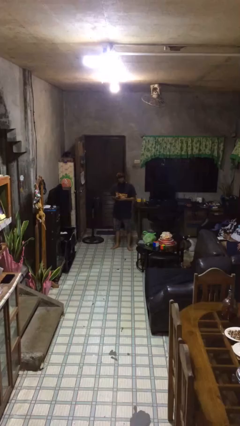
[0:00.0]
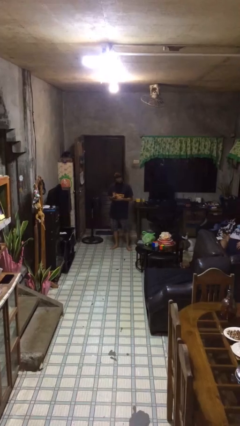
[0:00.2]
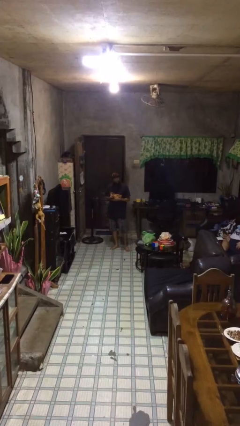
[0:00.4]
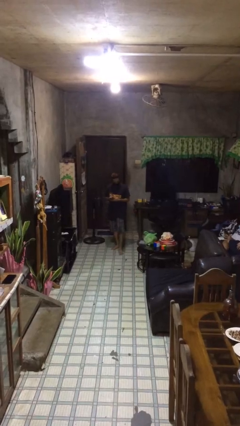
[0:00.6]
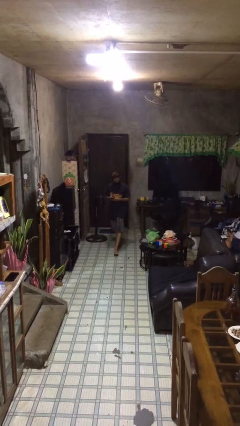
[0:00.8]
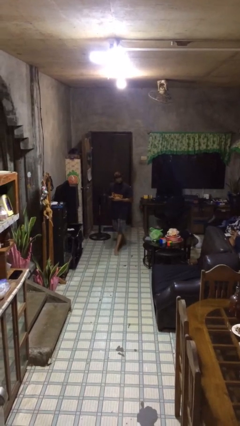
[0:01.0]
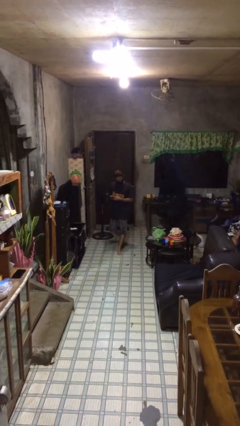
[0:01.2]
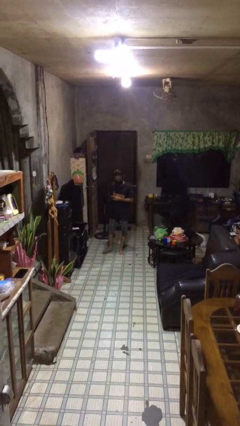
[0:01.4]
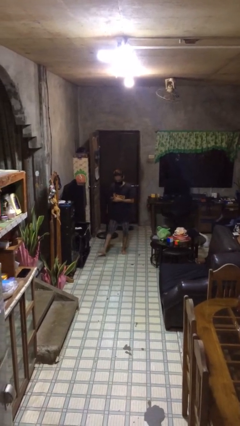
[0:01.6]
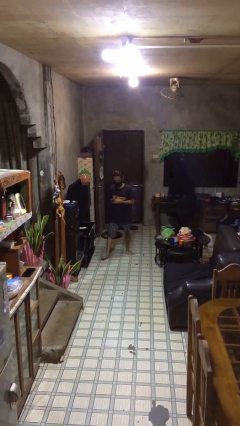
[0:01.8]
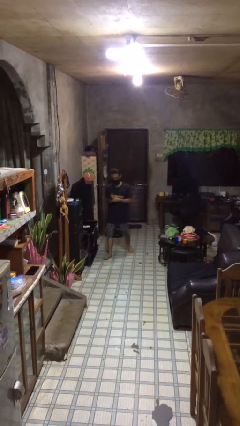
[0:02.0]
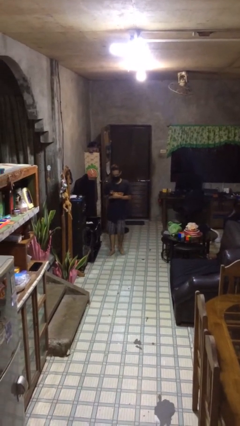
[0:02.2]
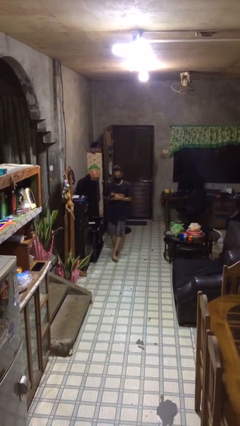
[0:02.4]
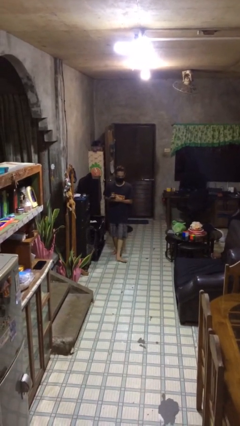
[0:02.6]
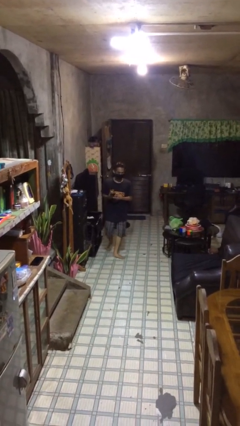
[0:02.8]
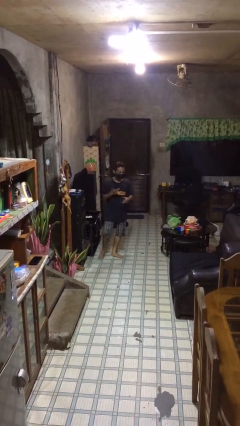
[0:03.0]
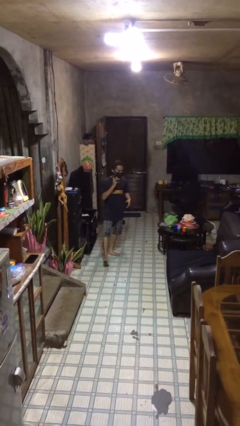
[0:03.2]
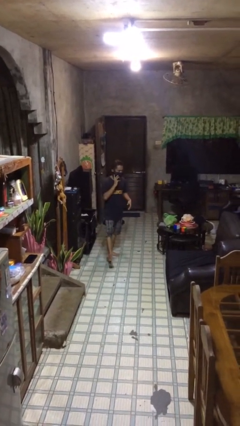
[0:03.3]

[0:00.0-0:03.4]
person texts on phone

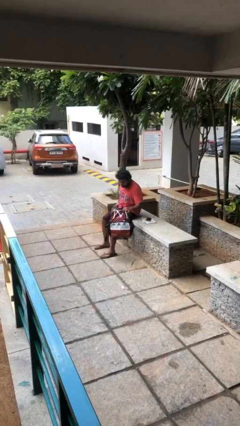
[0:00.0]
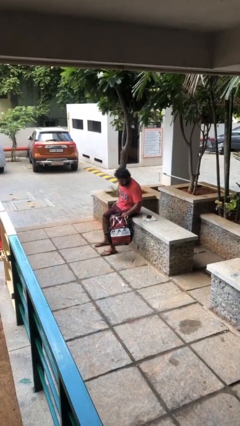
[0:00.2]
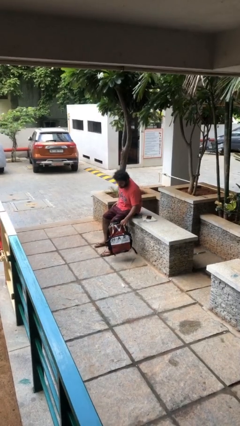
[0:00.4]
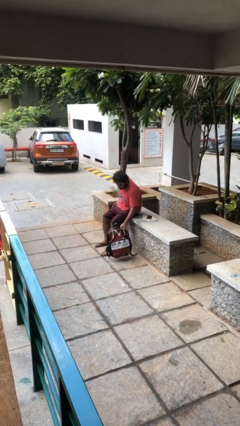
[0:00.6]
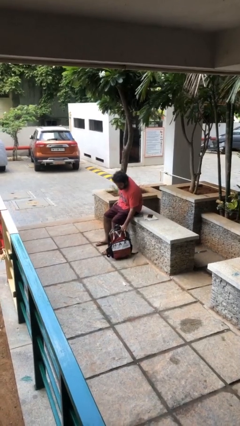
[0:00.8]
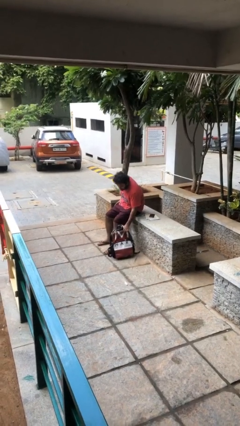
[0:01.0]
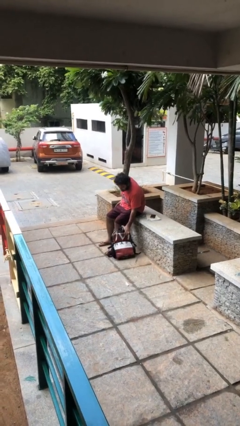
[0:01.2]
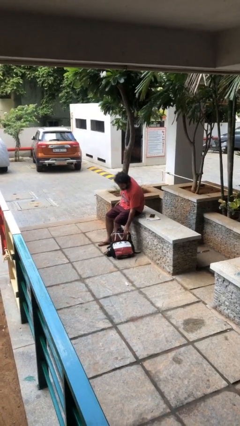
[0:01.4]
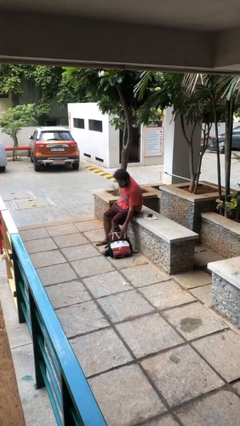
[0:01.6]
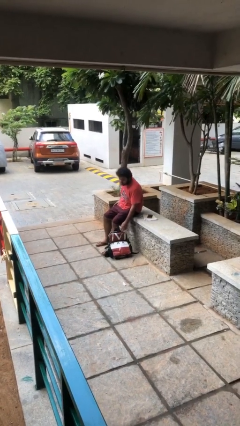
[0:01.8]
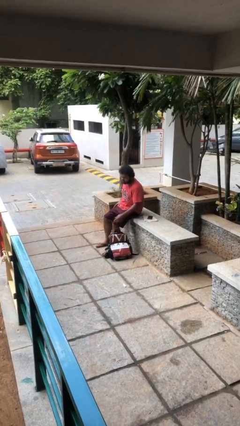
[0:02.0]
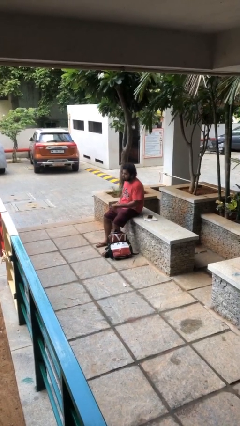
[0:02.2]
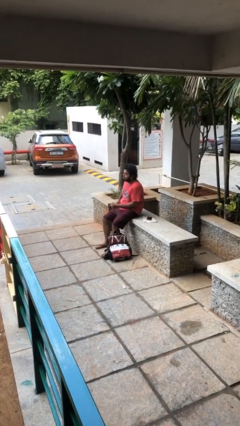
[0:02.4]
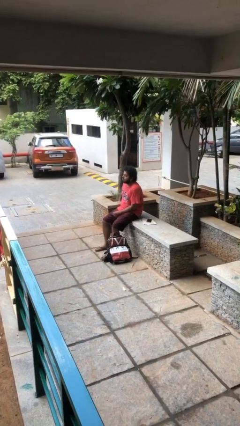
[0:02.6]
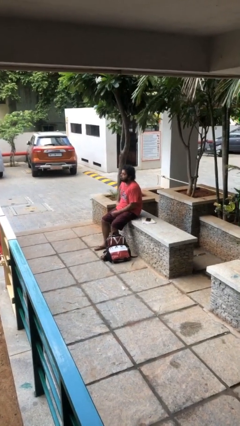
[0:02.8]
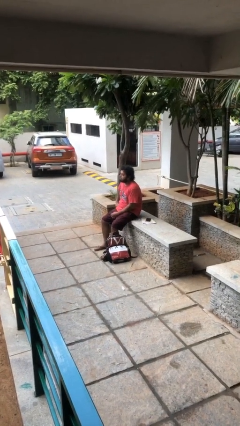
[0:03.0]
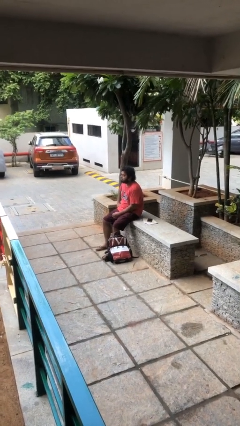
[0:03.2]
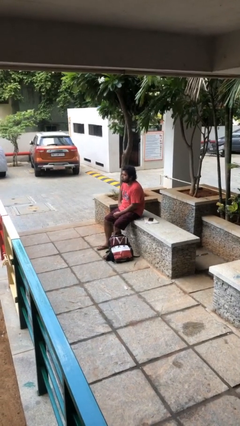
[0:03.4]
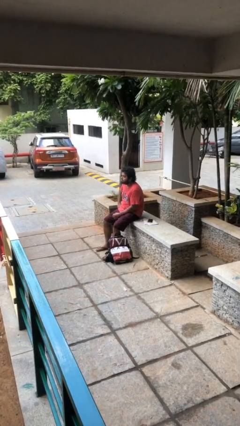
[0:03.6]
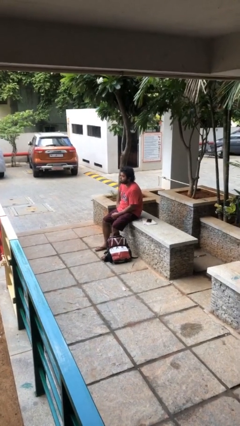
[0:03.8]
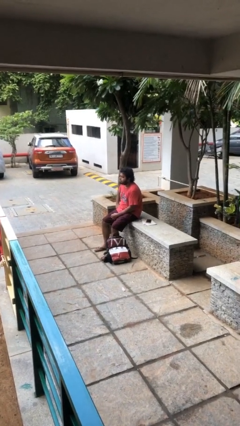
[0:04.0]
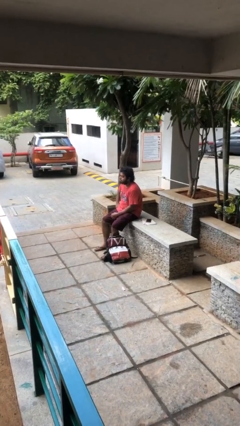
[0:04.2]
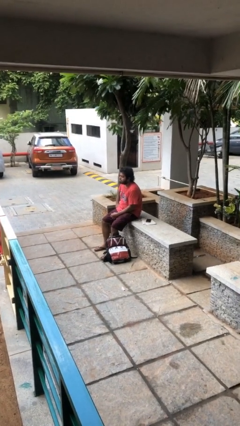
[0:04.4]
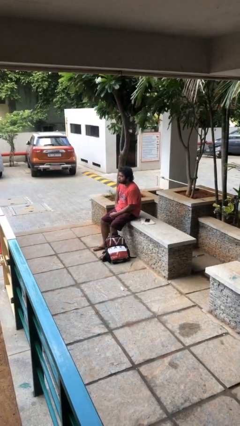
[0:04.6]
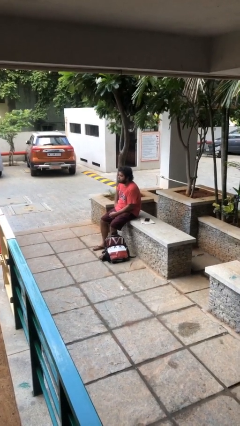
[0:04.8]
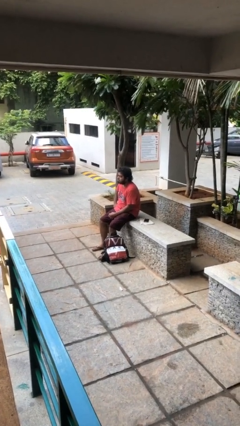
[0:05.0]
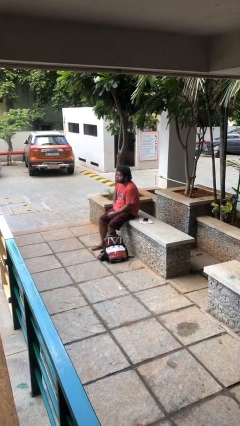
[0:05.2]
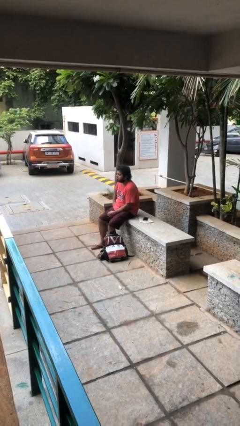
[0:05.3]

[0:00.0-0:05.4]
person puts down object on floor

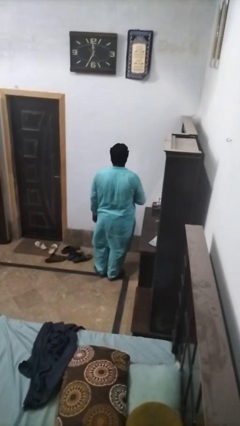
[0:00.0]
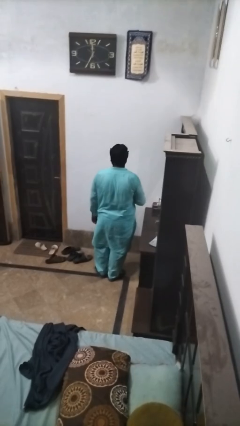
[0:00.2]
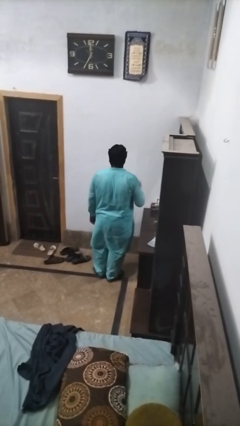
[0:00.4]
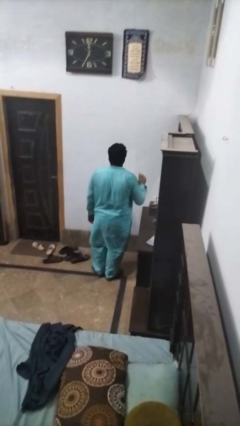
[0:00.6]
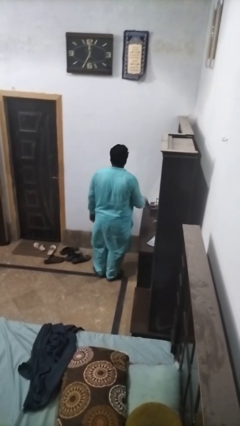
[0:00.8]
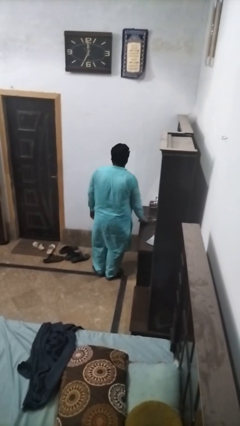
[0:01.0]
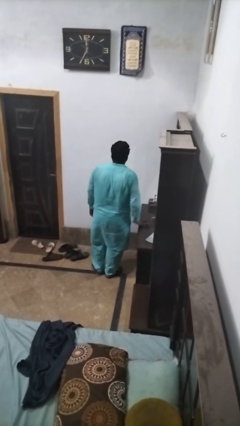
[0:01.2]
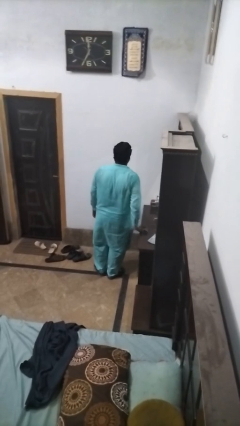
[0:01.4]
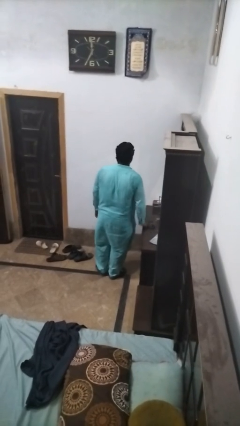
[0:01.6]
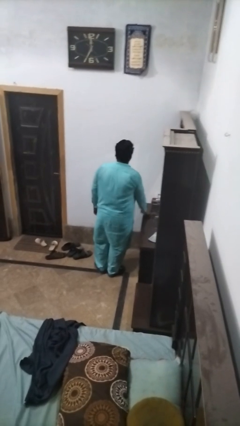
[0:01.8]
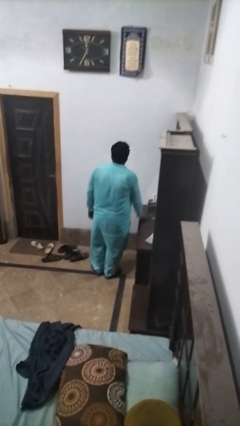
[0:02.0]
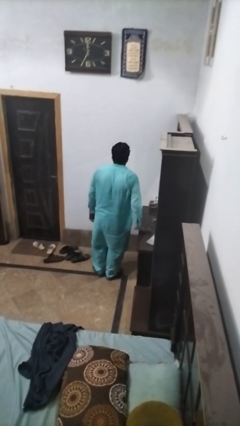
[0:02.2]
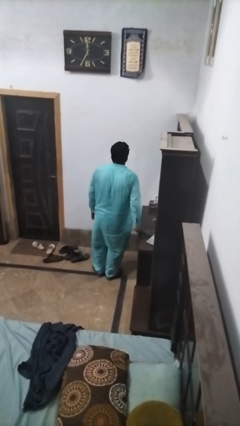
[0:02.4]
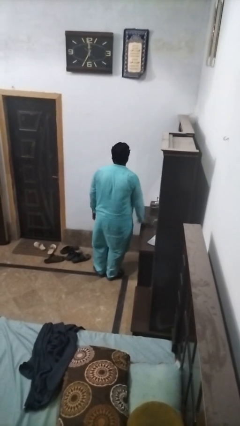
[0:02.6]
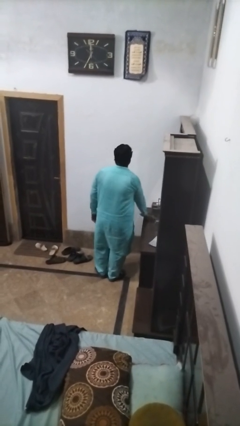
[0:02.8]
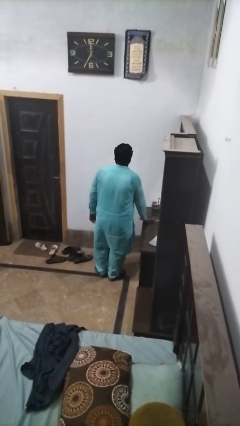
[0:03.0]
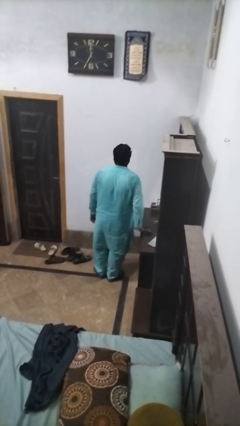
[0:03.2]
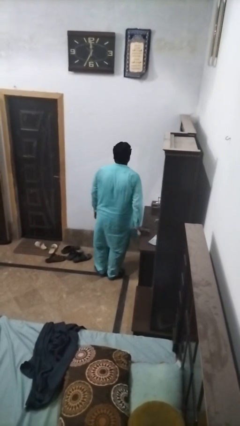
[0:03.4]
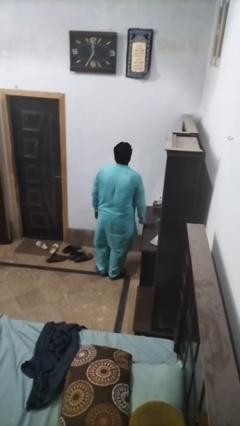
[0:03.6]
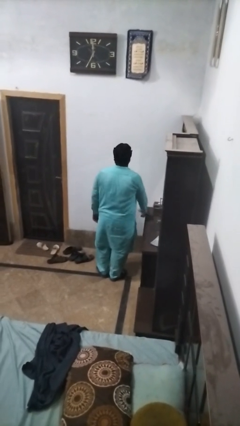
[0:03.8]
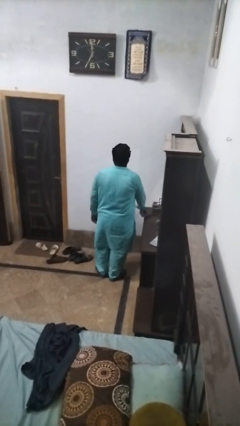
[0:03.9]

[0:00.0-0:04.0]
person cleans table with rag

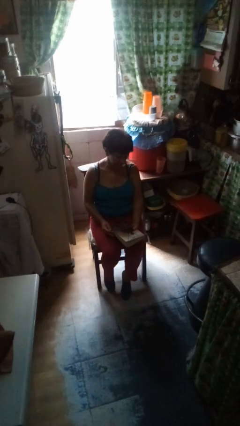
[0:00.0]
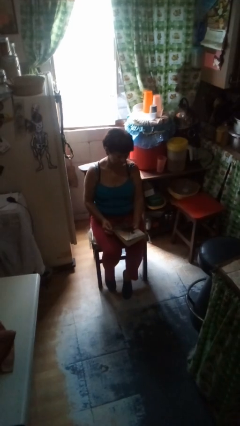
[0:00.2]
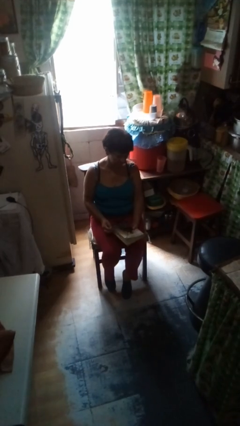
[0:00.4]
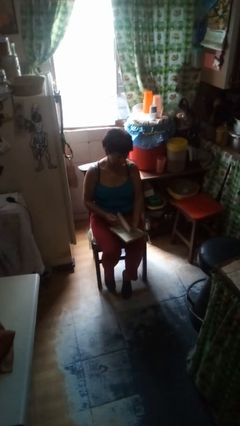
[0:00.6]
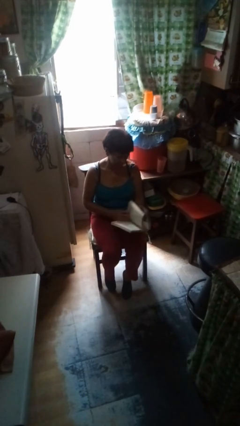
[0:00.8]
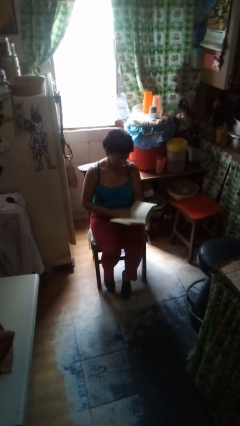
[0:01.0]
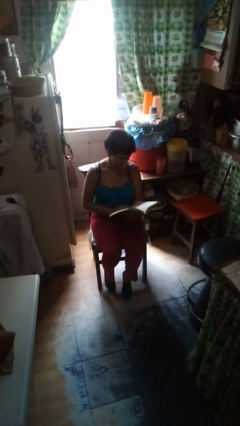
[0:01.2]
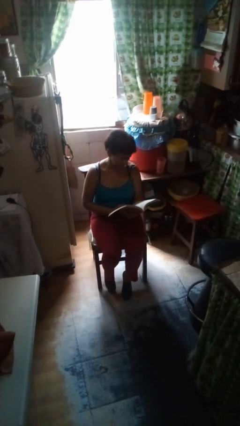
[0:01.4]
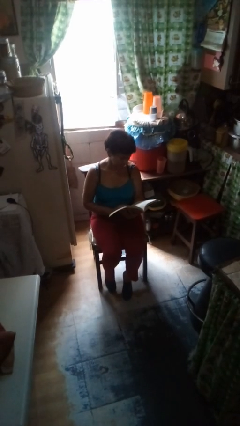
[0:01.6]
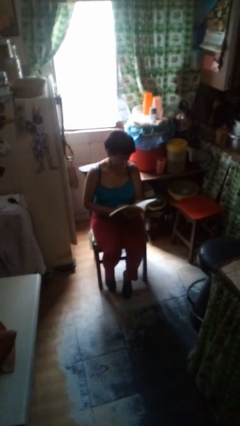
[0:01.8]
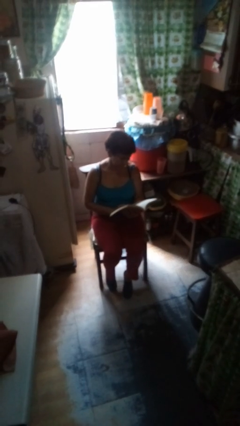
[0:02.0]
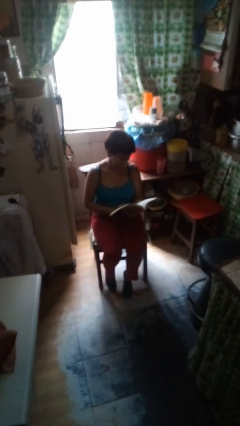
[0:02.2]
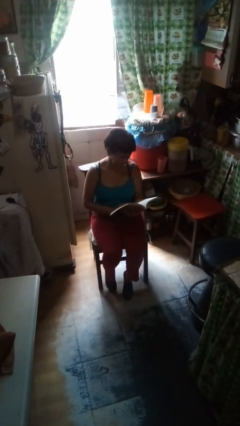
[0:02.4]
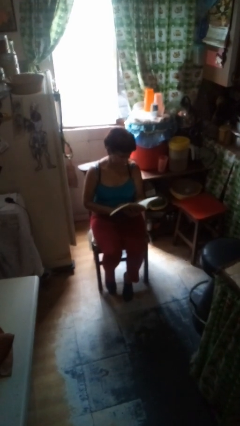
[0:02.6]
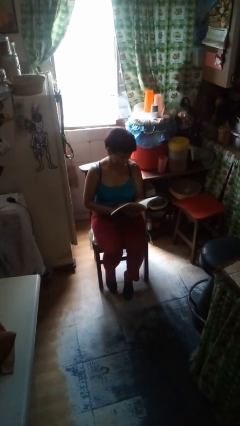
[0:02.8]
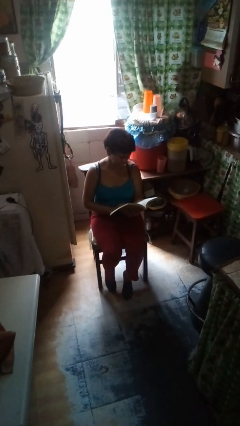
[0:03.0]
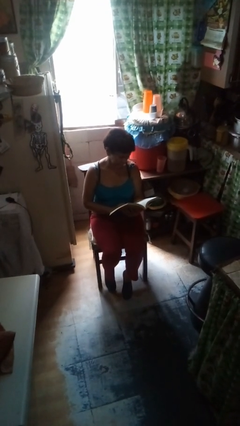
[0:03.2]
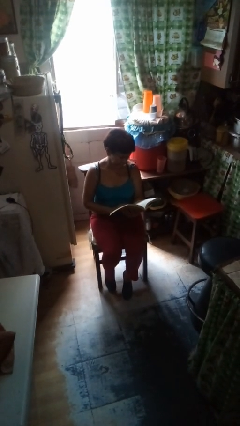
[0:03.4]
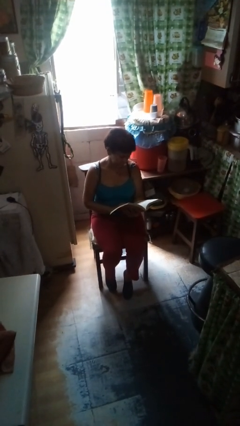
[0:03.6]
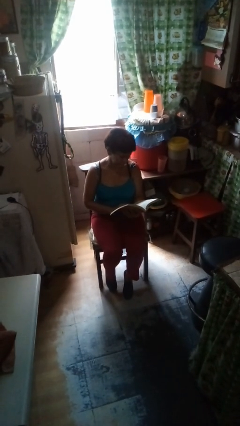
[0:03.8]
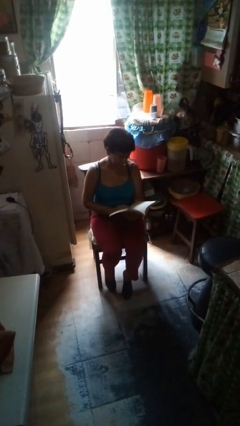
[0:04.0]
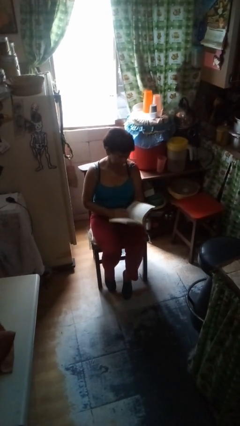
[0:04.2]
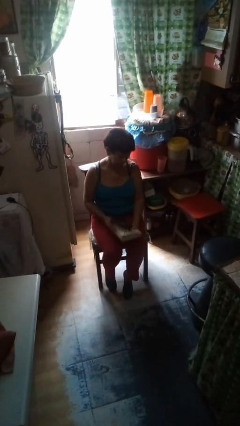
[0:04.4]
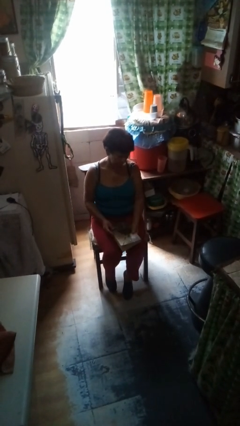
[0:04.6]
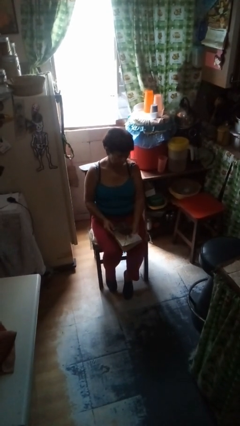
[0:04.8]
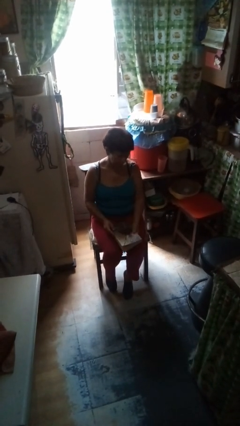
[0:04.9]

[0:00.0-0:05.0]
person reads book
